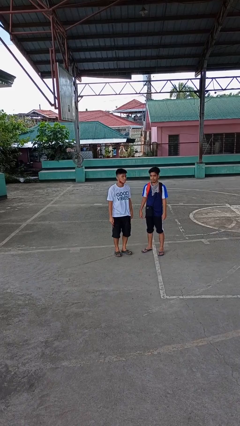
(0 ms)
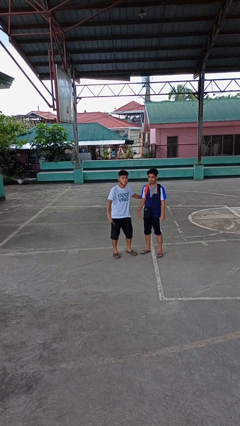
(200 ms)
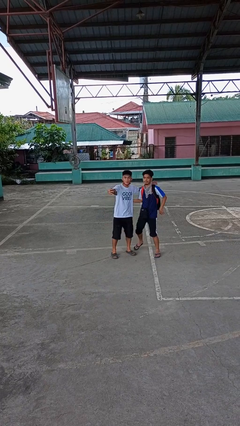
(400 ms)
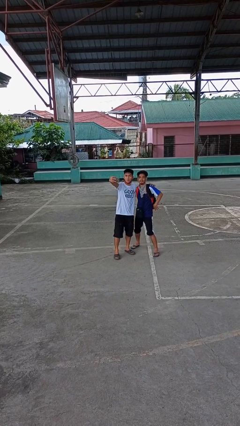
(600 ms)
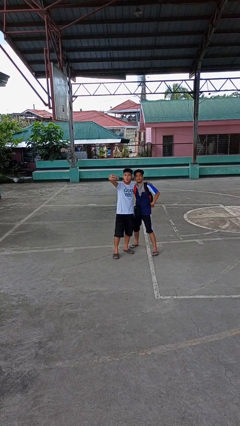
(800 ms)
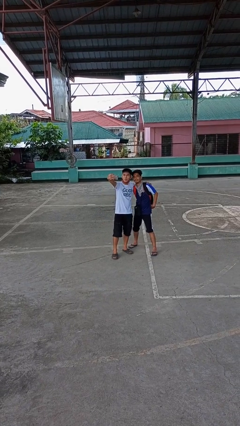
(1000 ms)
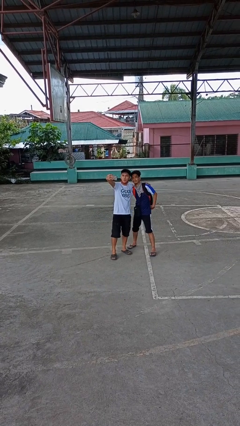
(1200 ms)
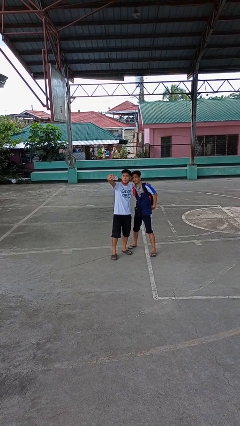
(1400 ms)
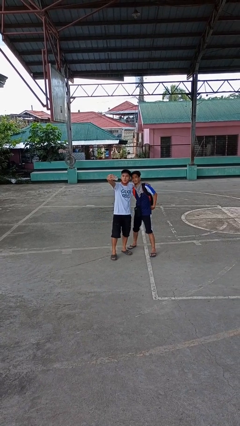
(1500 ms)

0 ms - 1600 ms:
person takes selfie with person

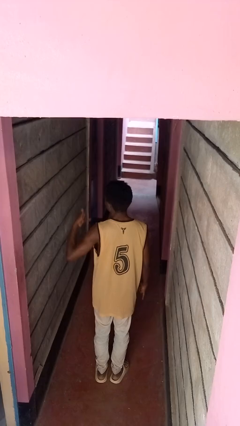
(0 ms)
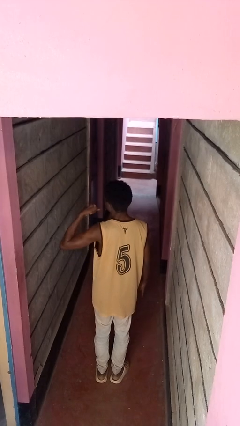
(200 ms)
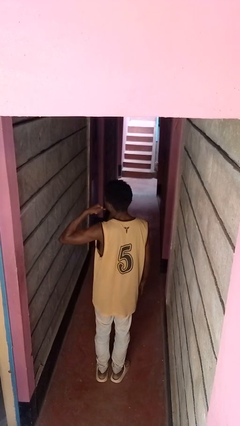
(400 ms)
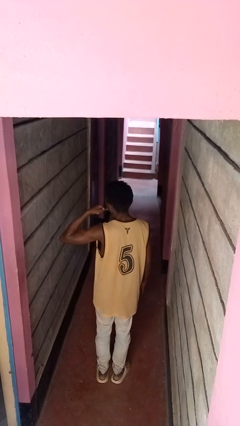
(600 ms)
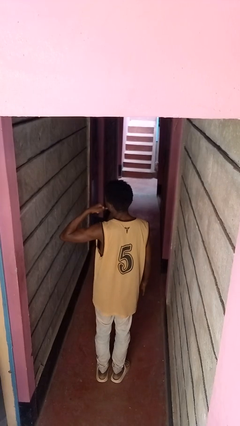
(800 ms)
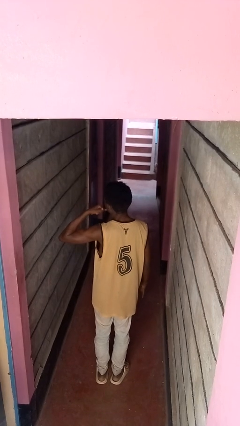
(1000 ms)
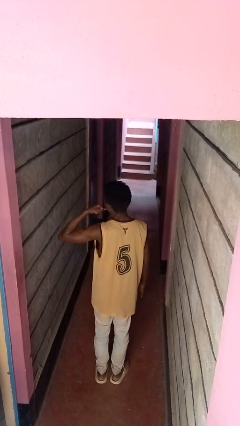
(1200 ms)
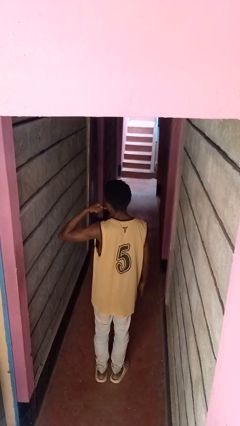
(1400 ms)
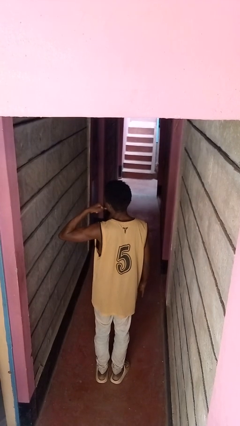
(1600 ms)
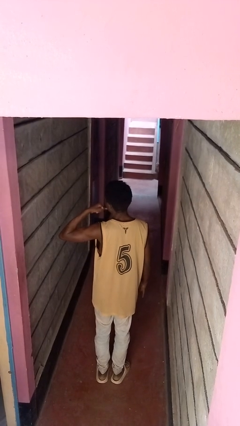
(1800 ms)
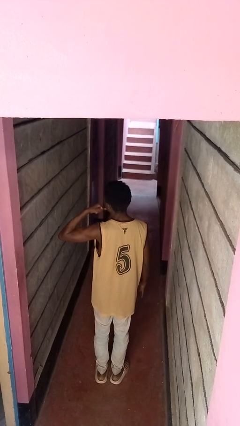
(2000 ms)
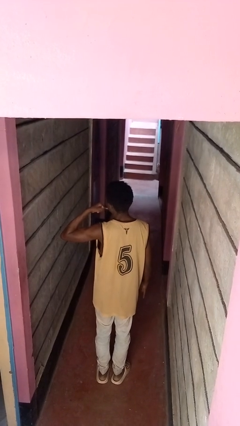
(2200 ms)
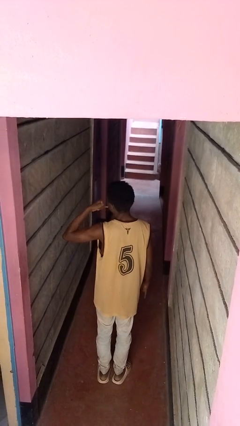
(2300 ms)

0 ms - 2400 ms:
person gestures call me

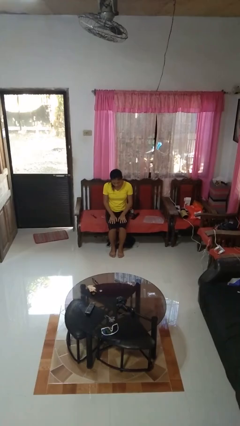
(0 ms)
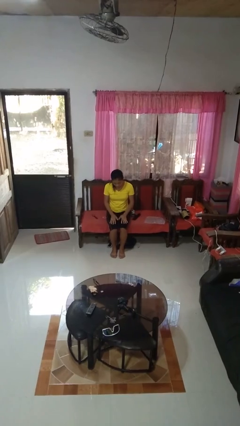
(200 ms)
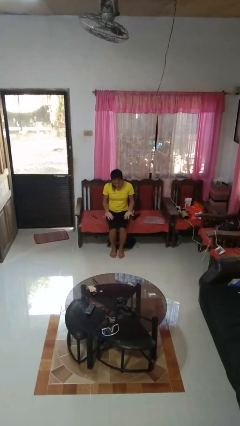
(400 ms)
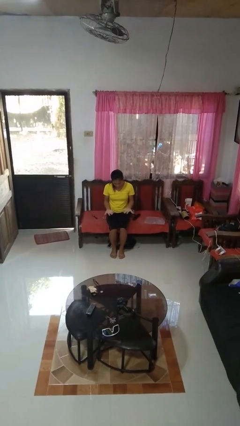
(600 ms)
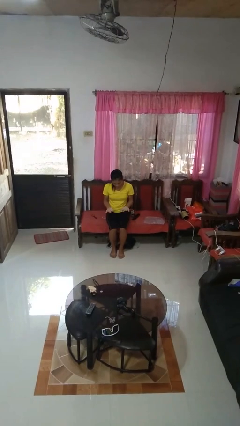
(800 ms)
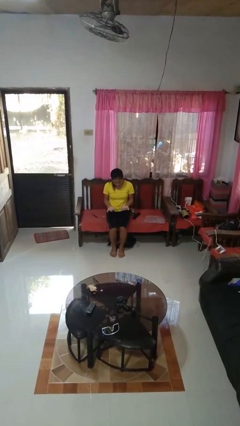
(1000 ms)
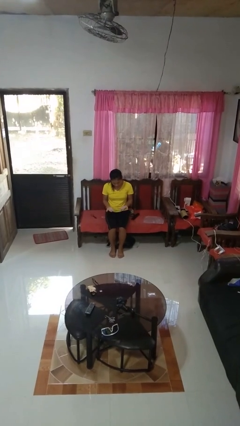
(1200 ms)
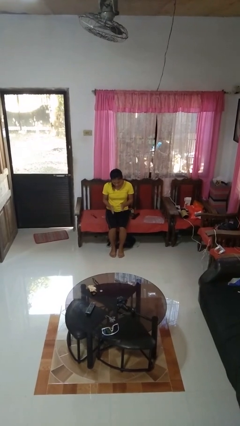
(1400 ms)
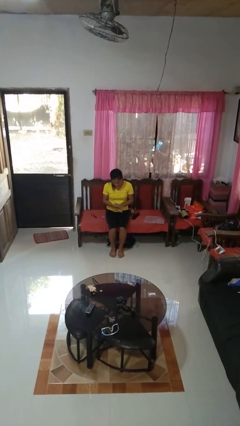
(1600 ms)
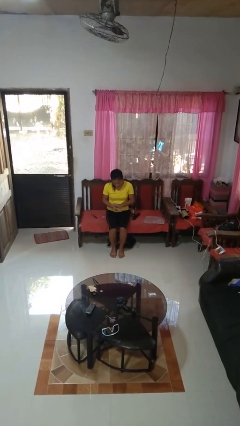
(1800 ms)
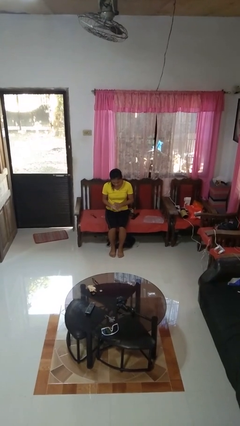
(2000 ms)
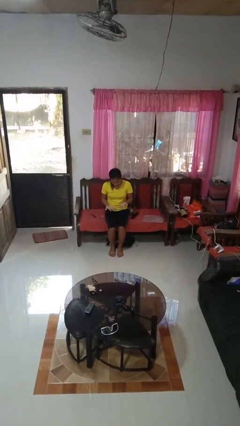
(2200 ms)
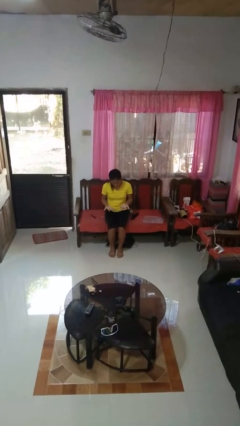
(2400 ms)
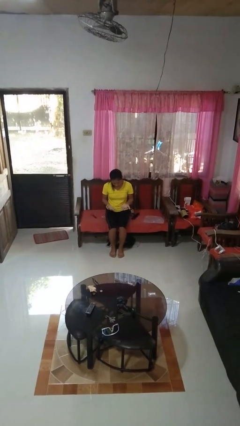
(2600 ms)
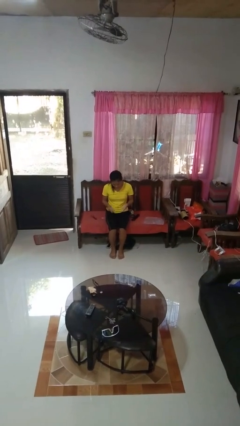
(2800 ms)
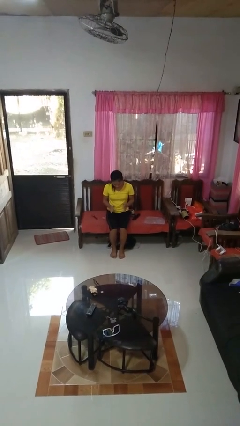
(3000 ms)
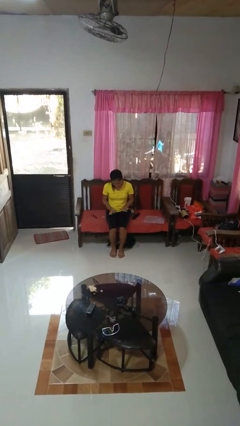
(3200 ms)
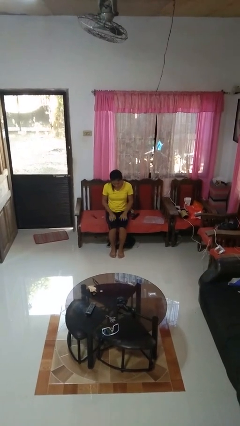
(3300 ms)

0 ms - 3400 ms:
person looks at hands in lap

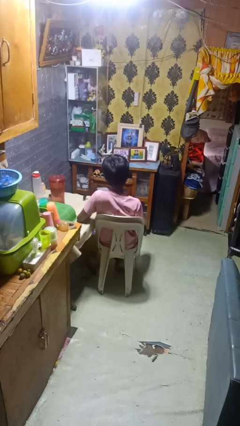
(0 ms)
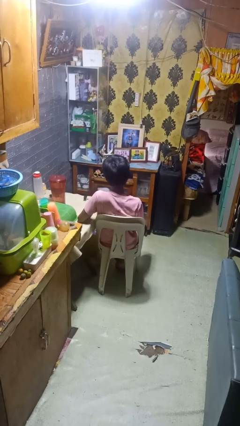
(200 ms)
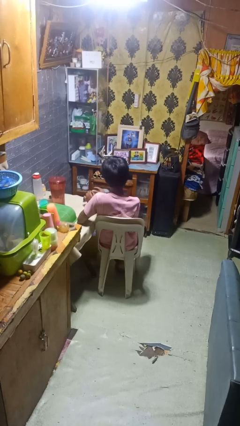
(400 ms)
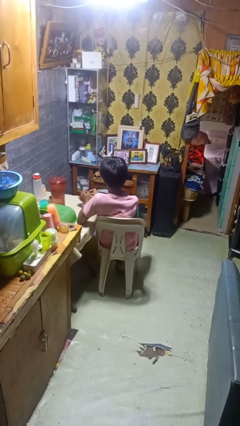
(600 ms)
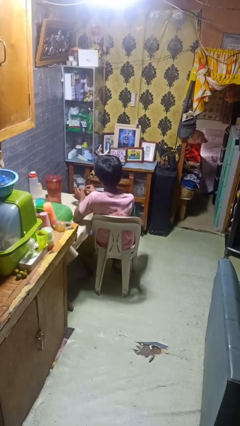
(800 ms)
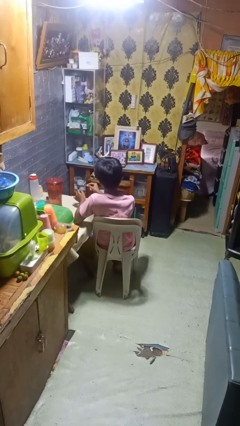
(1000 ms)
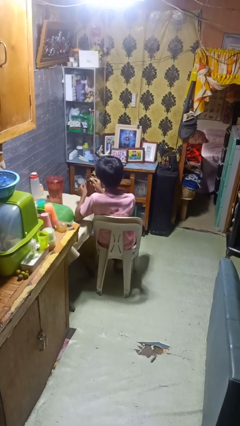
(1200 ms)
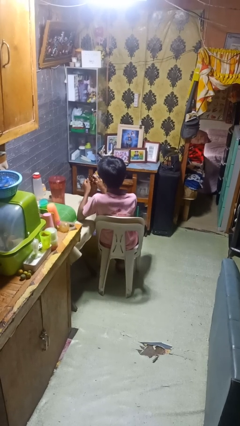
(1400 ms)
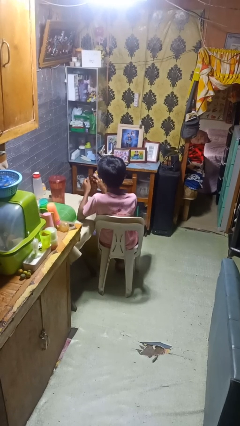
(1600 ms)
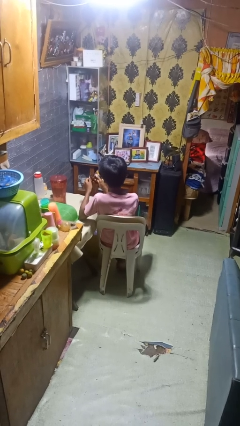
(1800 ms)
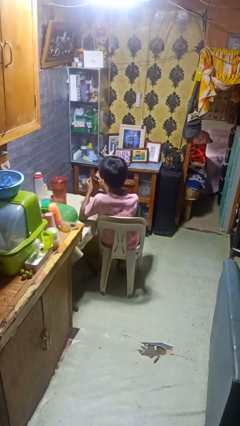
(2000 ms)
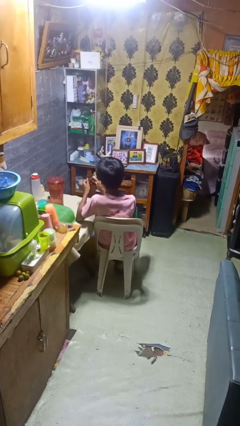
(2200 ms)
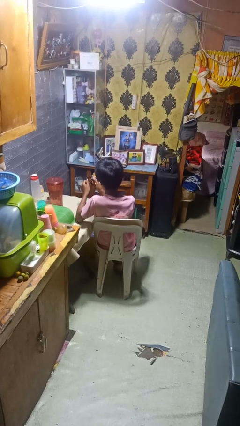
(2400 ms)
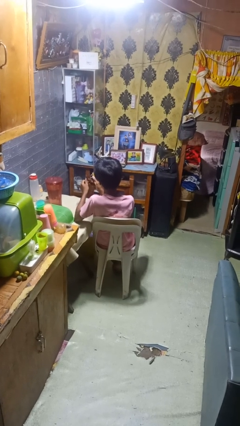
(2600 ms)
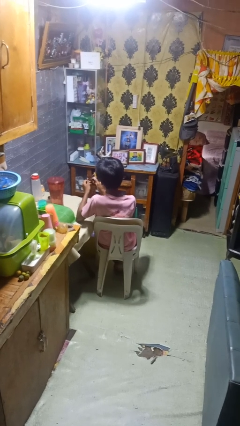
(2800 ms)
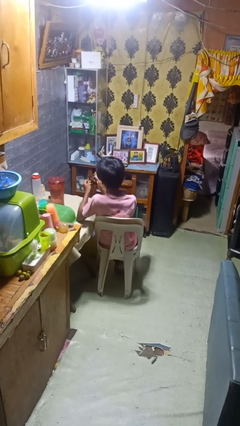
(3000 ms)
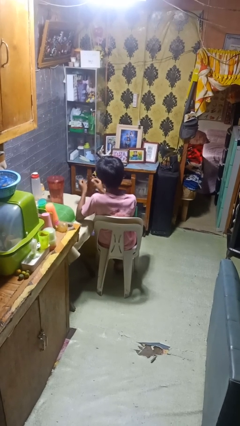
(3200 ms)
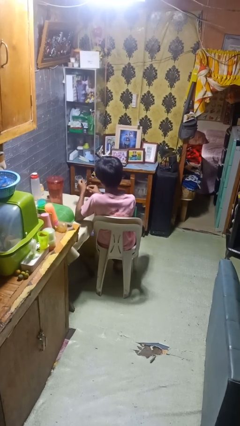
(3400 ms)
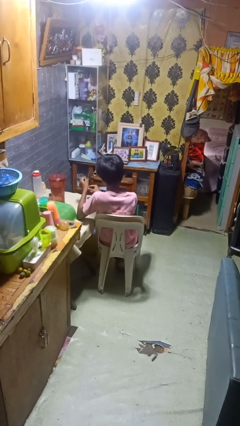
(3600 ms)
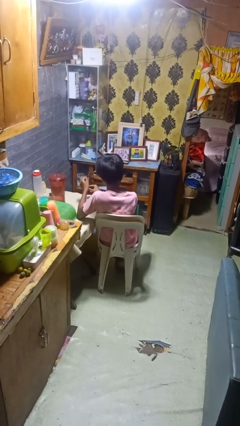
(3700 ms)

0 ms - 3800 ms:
person paints fingernails

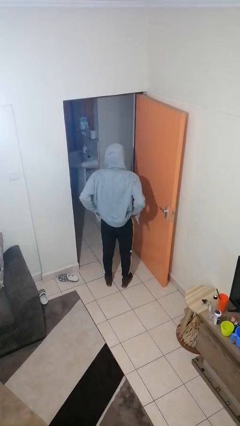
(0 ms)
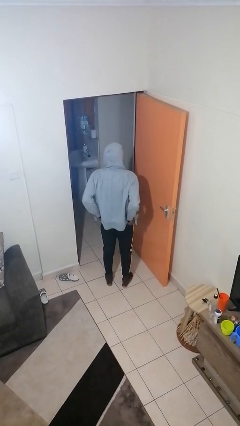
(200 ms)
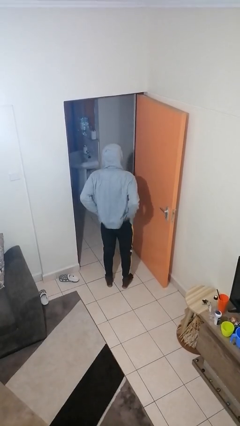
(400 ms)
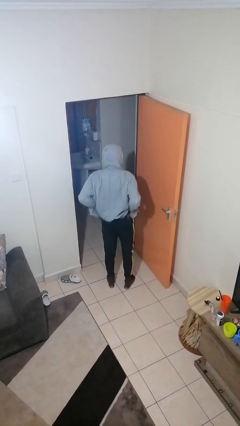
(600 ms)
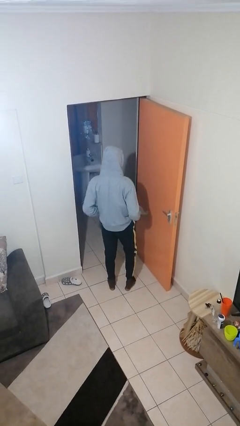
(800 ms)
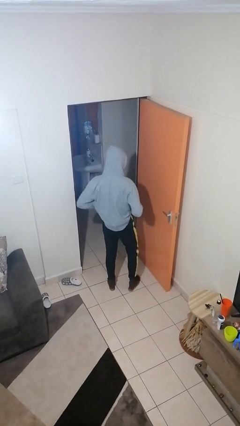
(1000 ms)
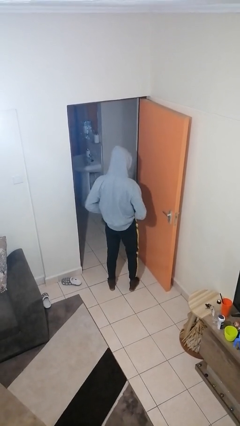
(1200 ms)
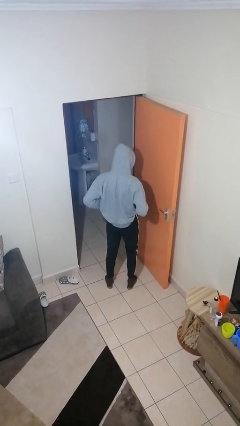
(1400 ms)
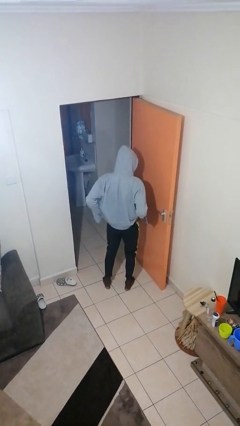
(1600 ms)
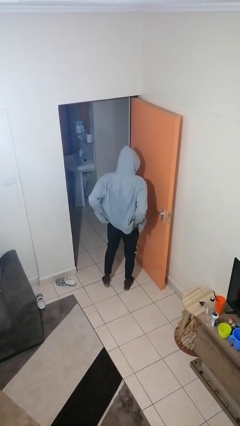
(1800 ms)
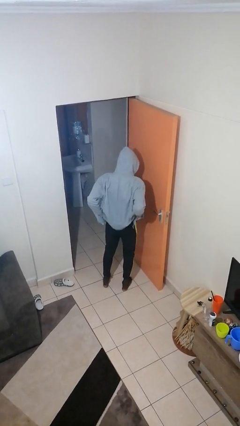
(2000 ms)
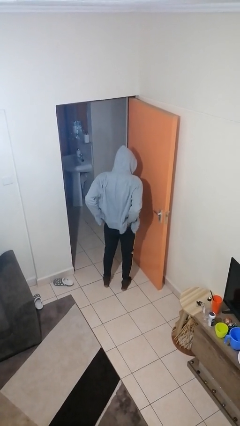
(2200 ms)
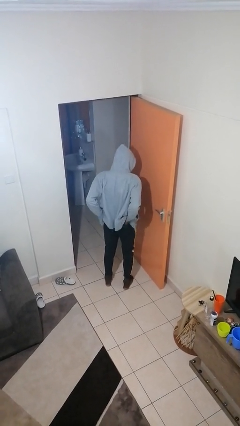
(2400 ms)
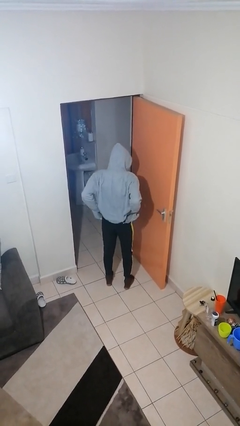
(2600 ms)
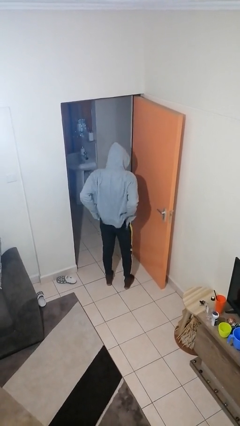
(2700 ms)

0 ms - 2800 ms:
person hikes up pants

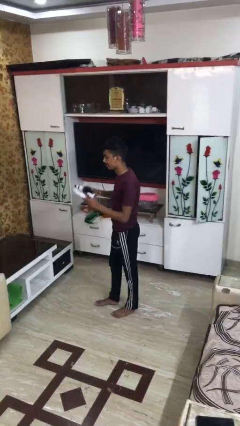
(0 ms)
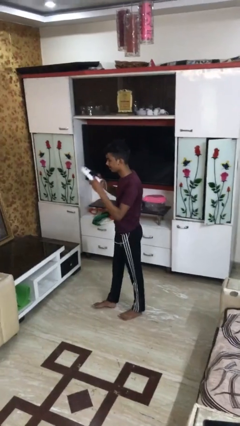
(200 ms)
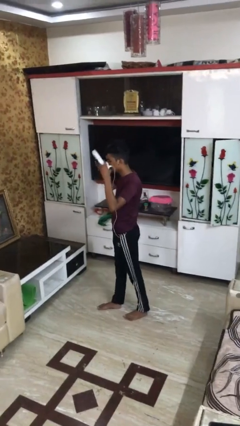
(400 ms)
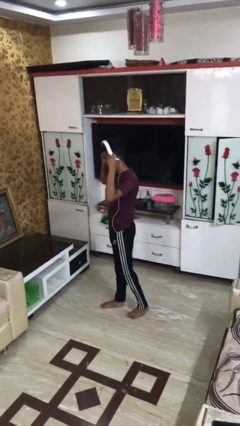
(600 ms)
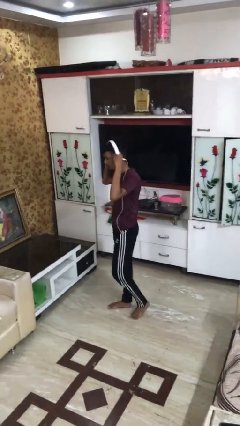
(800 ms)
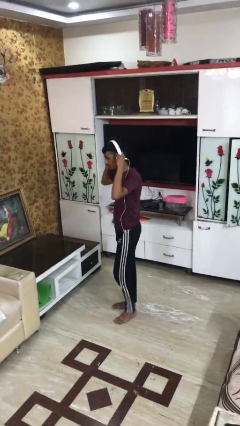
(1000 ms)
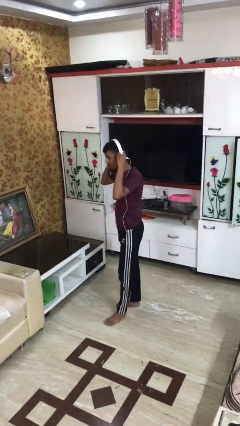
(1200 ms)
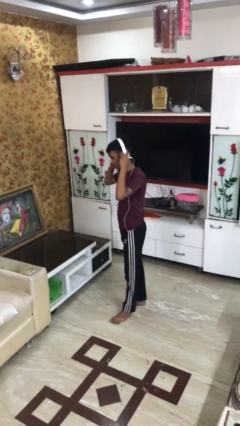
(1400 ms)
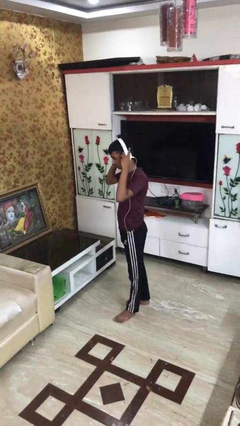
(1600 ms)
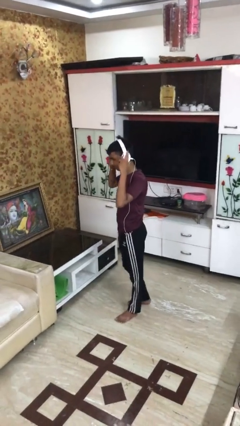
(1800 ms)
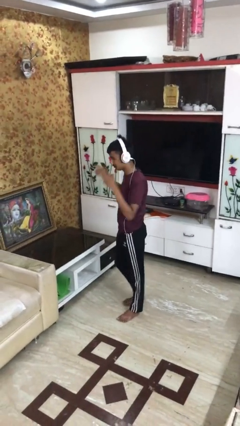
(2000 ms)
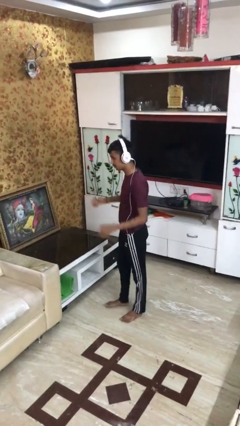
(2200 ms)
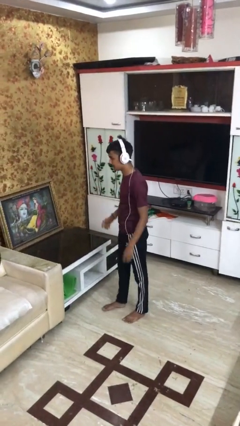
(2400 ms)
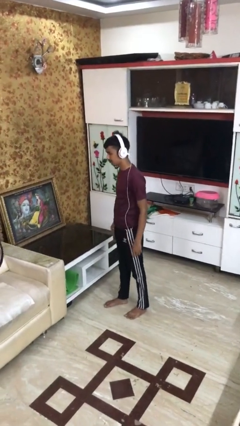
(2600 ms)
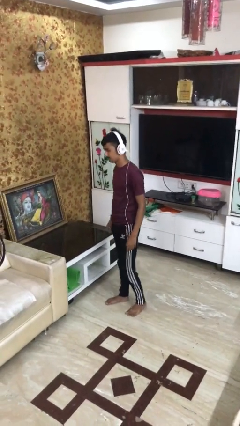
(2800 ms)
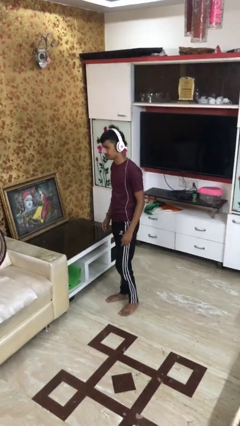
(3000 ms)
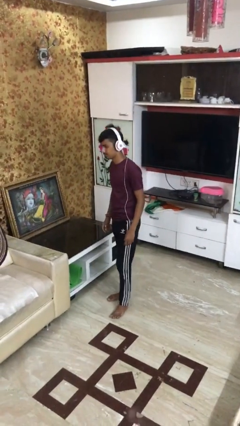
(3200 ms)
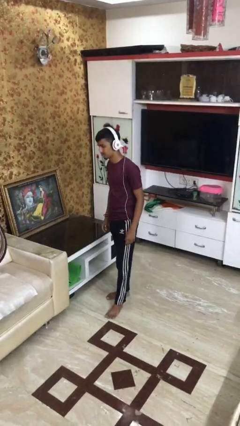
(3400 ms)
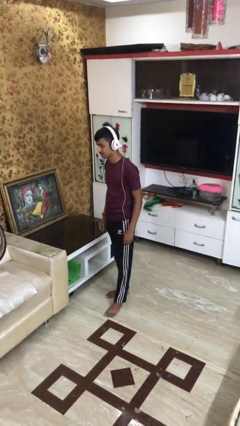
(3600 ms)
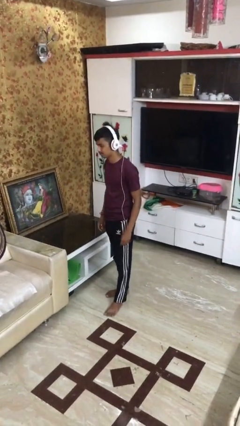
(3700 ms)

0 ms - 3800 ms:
person puts on headphones
